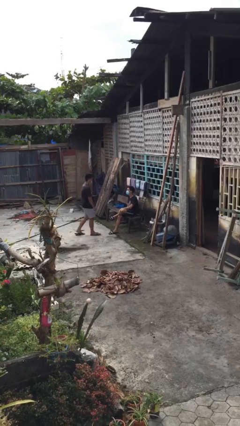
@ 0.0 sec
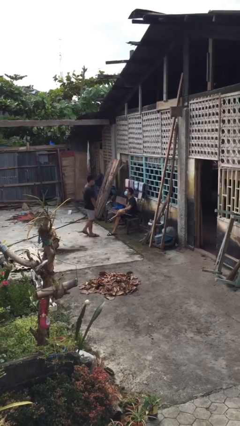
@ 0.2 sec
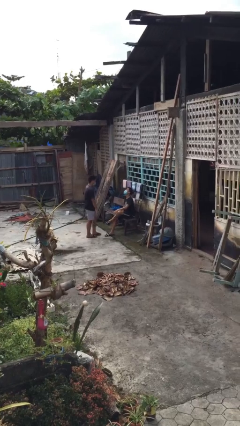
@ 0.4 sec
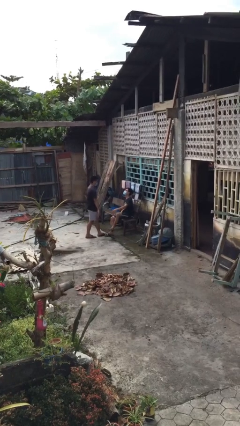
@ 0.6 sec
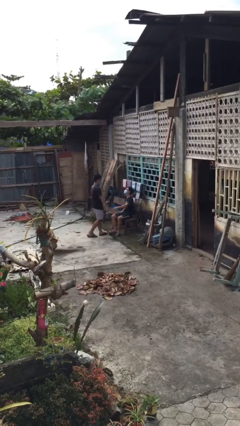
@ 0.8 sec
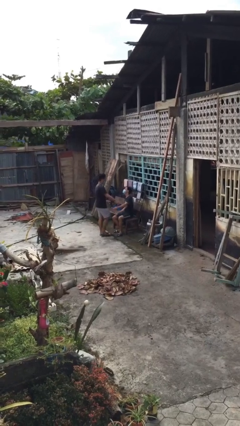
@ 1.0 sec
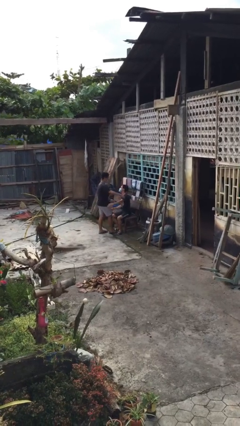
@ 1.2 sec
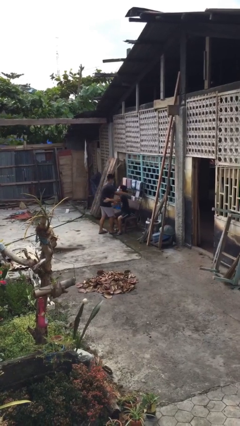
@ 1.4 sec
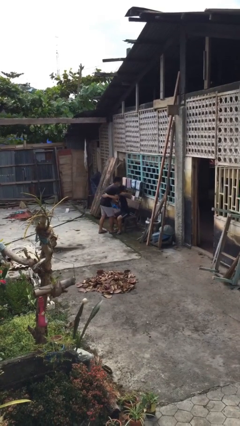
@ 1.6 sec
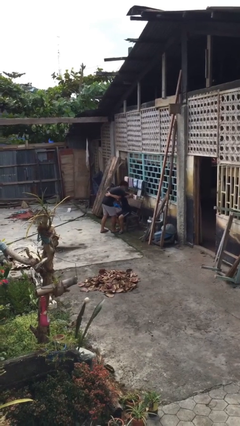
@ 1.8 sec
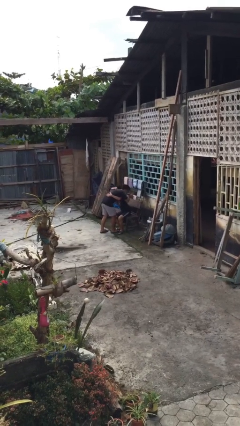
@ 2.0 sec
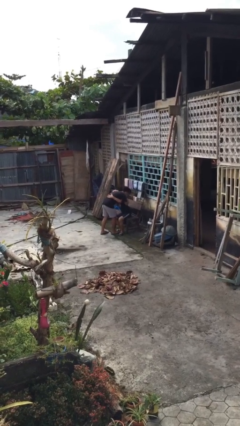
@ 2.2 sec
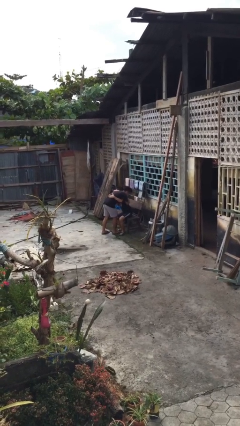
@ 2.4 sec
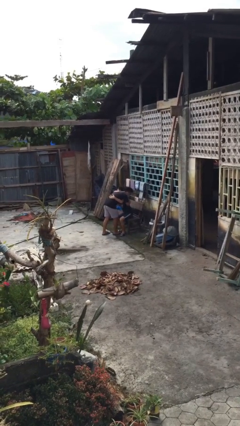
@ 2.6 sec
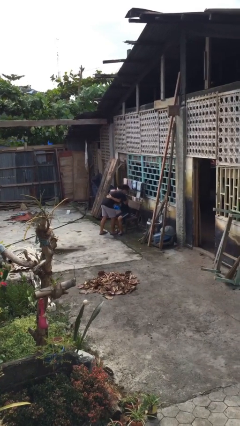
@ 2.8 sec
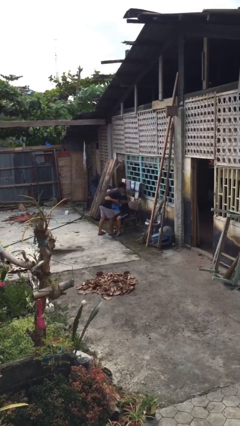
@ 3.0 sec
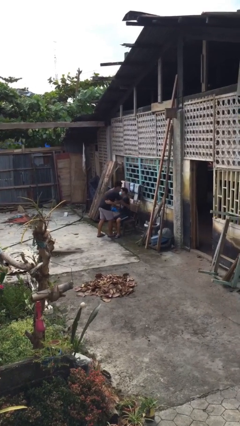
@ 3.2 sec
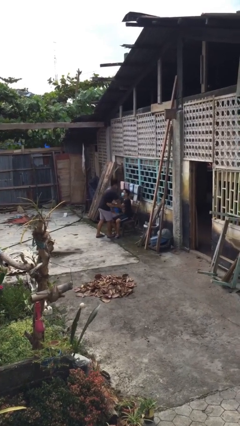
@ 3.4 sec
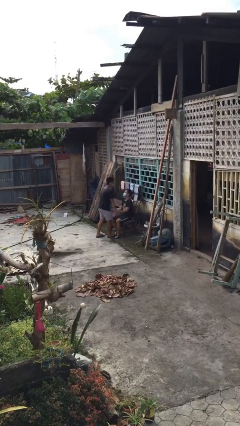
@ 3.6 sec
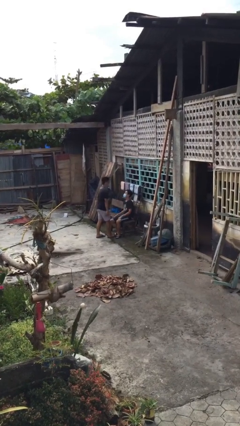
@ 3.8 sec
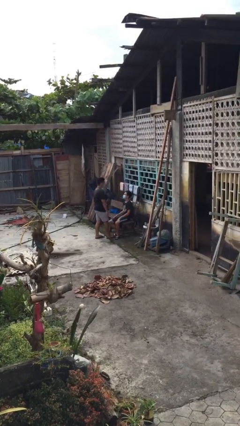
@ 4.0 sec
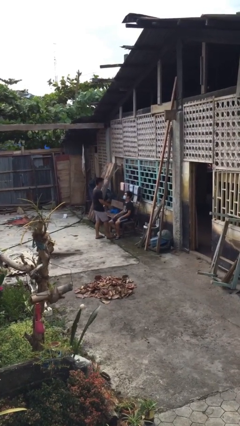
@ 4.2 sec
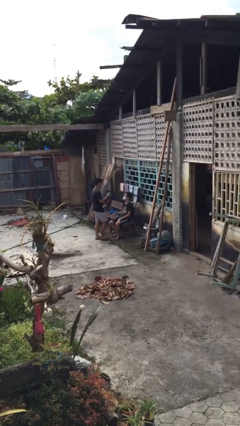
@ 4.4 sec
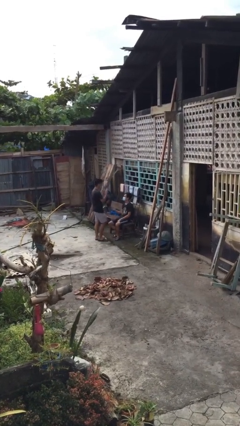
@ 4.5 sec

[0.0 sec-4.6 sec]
person embraces person

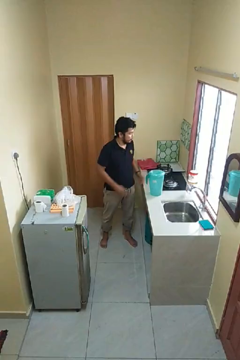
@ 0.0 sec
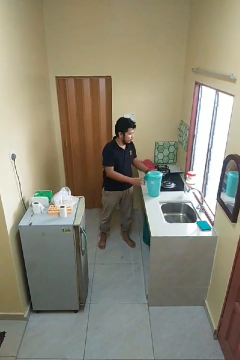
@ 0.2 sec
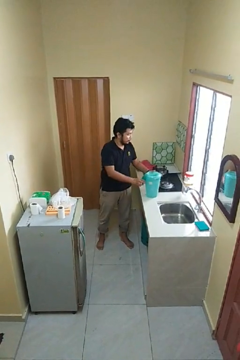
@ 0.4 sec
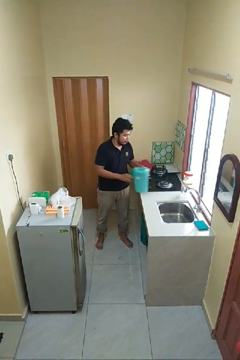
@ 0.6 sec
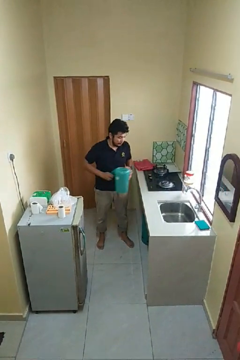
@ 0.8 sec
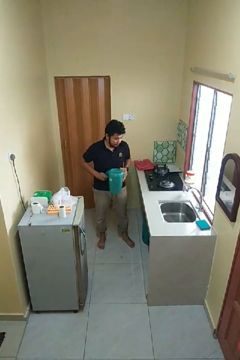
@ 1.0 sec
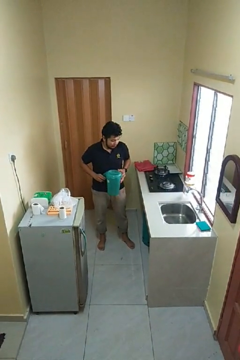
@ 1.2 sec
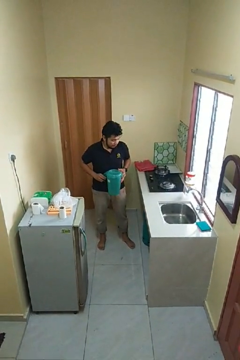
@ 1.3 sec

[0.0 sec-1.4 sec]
person picks up object from countertop

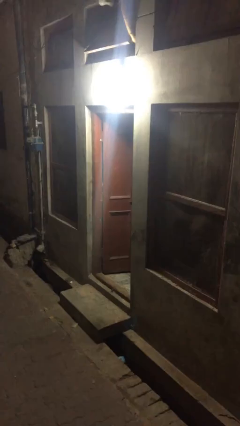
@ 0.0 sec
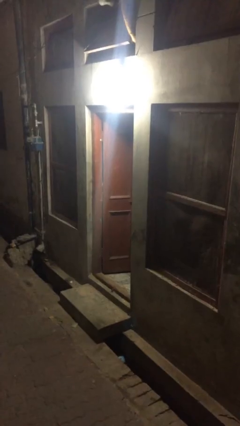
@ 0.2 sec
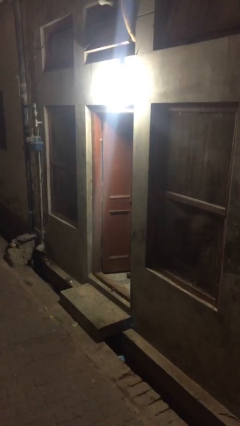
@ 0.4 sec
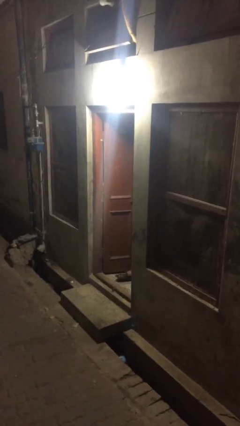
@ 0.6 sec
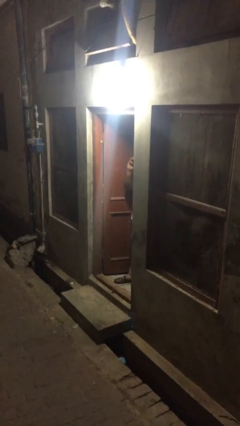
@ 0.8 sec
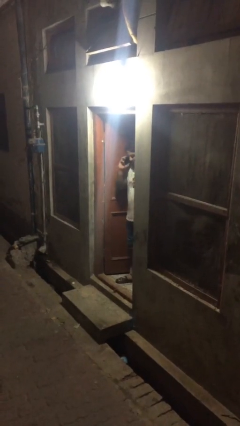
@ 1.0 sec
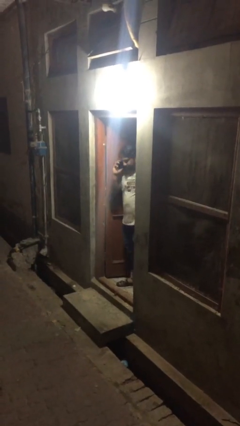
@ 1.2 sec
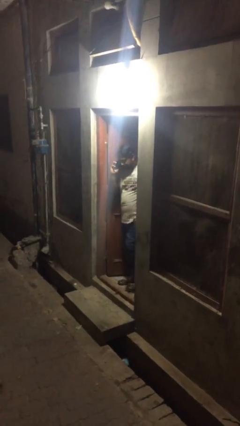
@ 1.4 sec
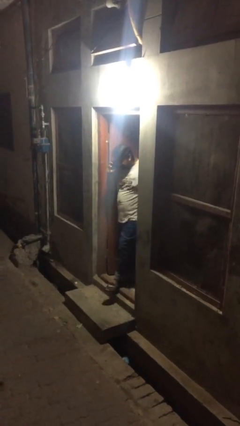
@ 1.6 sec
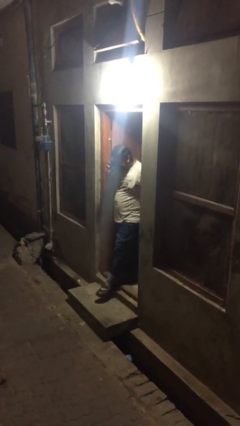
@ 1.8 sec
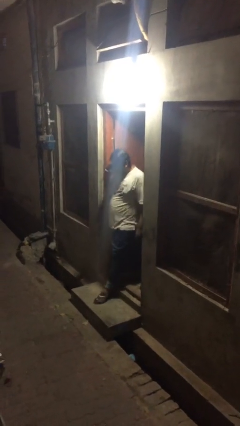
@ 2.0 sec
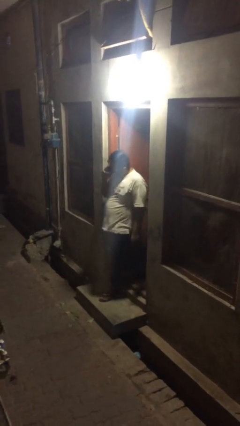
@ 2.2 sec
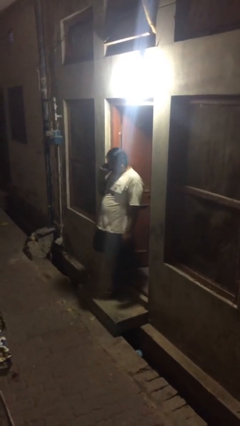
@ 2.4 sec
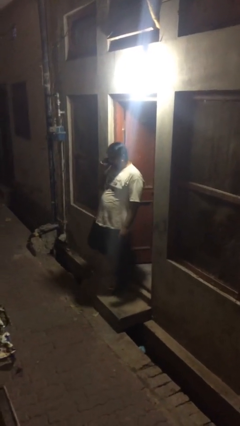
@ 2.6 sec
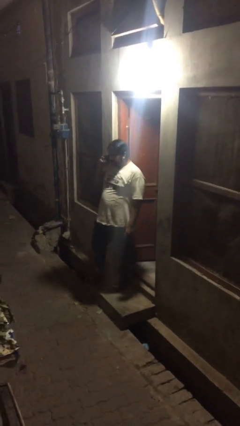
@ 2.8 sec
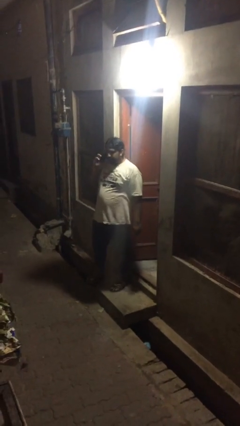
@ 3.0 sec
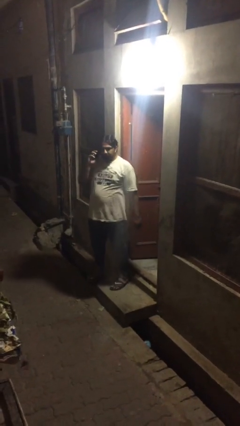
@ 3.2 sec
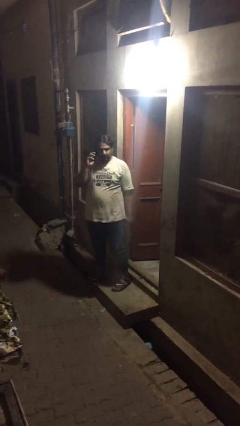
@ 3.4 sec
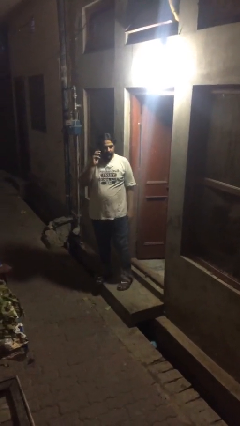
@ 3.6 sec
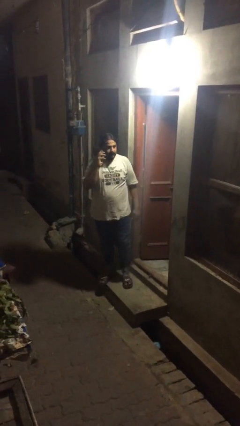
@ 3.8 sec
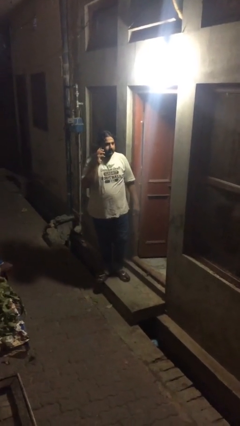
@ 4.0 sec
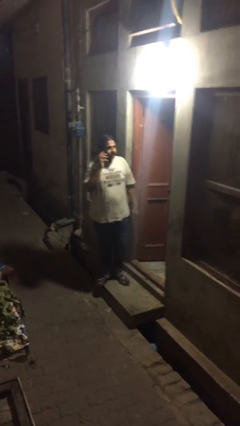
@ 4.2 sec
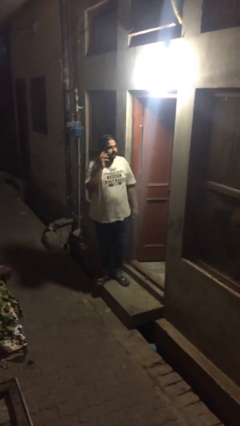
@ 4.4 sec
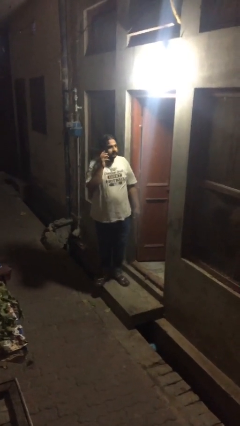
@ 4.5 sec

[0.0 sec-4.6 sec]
person enters scene through structure

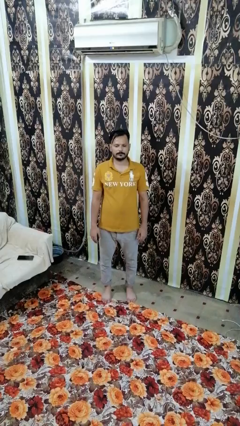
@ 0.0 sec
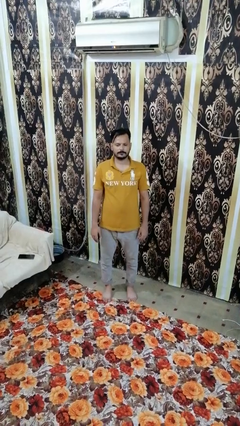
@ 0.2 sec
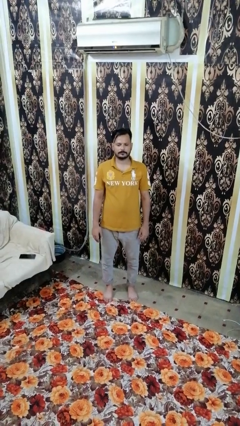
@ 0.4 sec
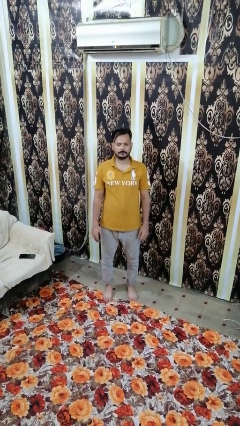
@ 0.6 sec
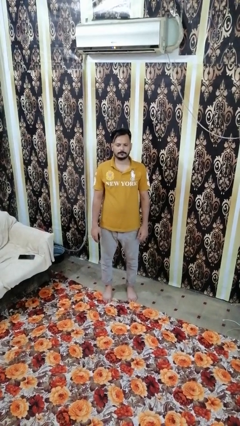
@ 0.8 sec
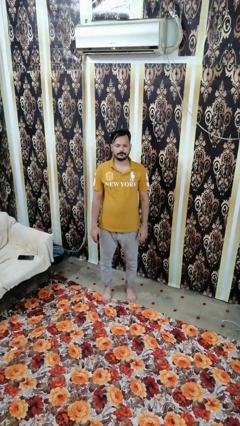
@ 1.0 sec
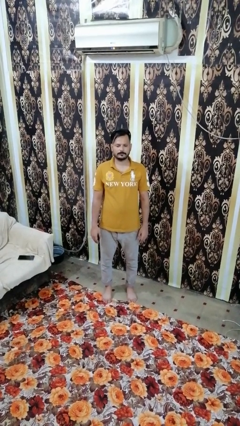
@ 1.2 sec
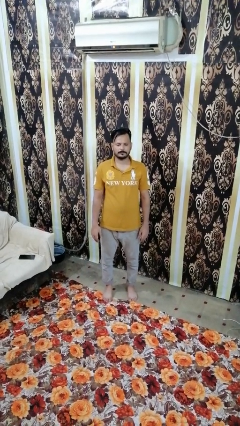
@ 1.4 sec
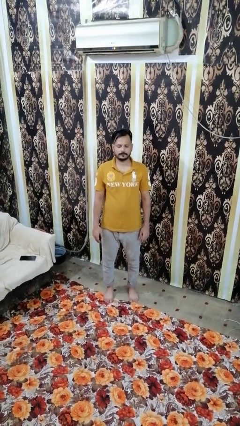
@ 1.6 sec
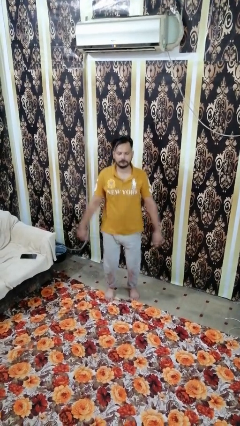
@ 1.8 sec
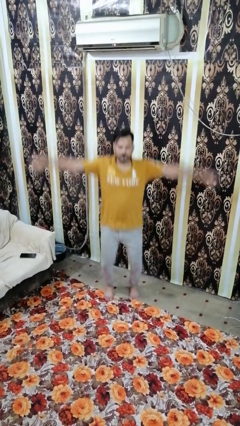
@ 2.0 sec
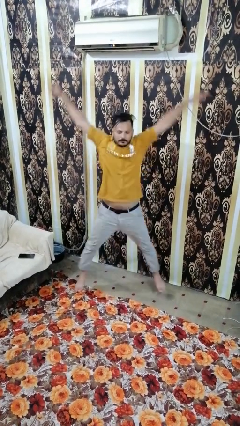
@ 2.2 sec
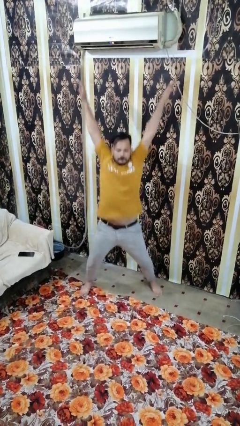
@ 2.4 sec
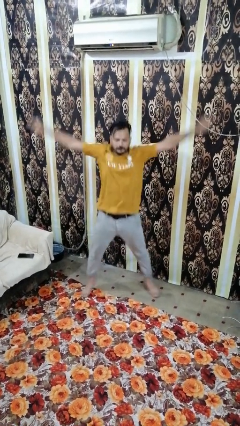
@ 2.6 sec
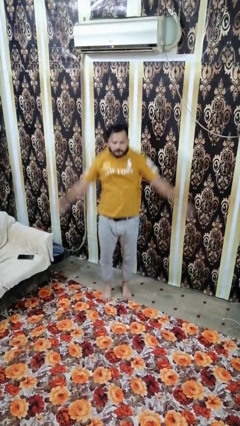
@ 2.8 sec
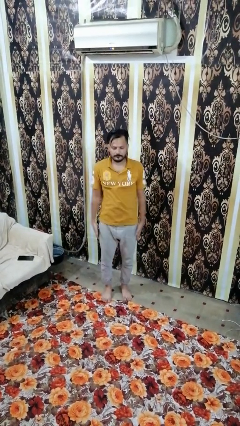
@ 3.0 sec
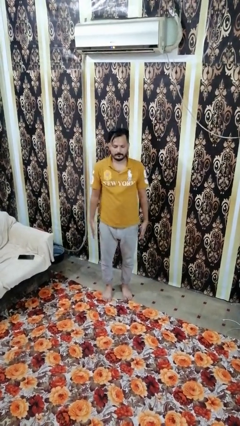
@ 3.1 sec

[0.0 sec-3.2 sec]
person exercises with jumping jacks

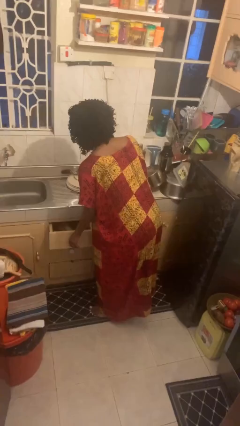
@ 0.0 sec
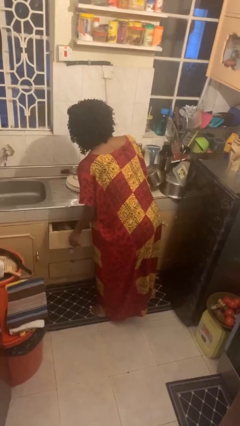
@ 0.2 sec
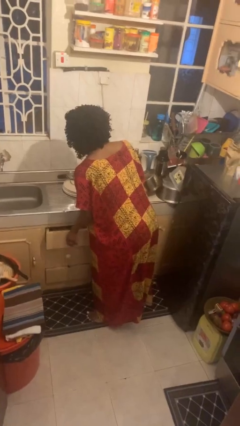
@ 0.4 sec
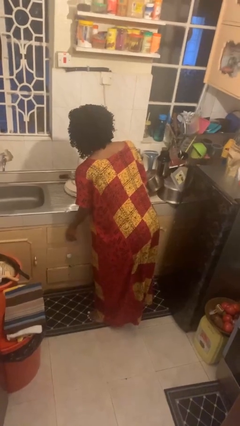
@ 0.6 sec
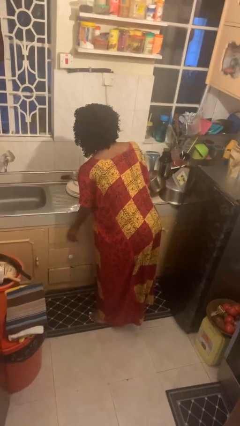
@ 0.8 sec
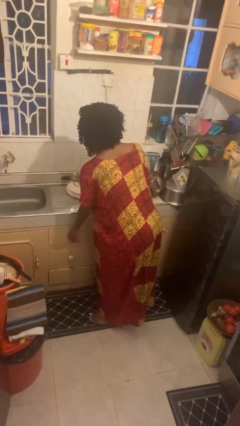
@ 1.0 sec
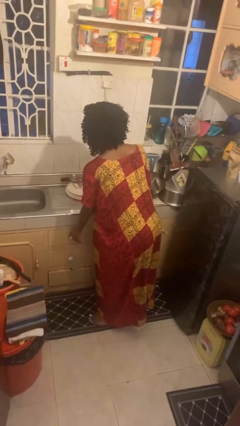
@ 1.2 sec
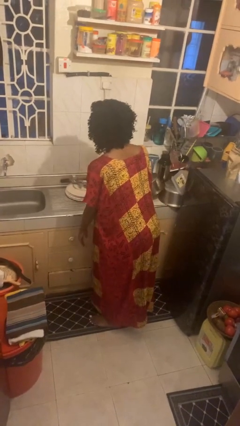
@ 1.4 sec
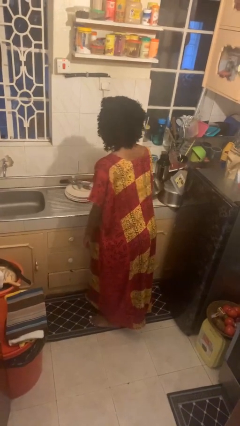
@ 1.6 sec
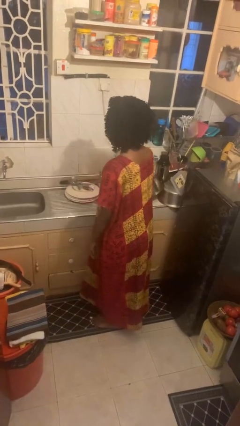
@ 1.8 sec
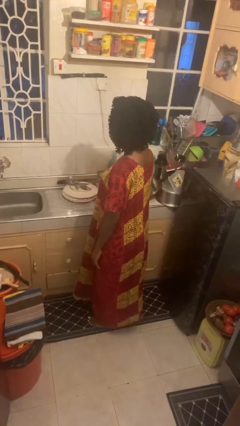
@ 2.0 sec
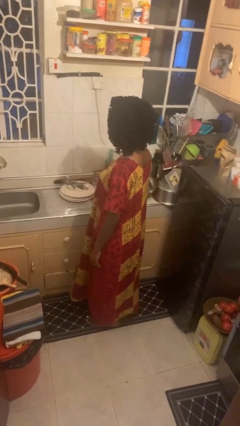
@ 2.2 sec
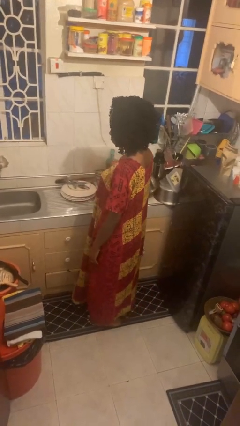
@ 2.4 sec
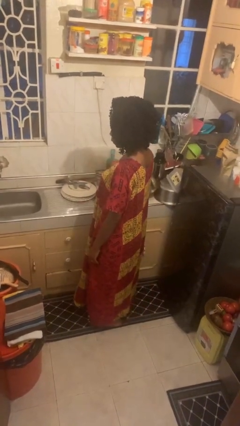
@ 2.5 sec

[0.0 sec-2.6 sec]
person closes kitchen drawer

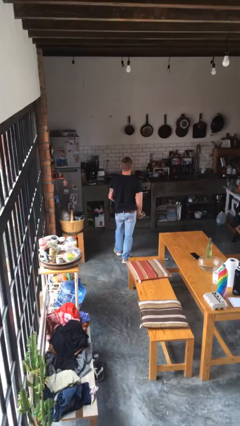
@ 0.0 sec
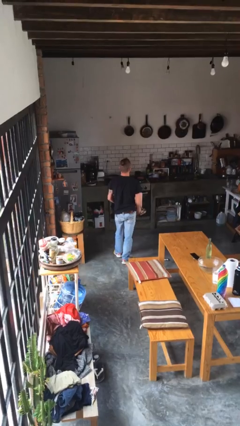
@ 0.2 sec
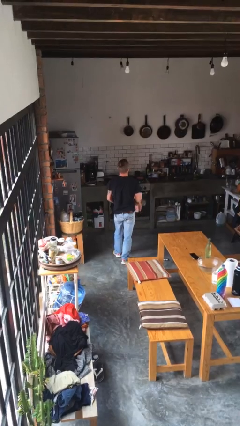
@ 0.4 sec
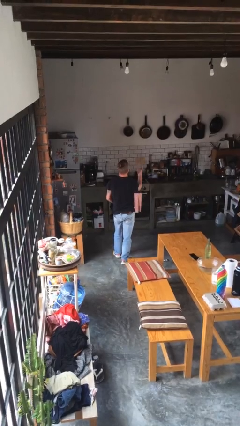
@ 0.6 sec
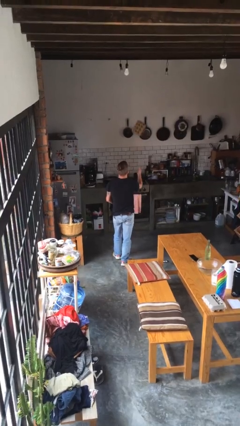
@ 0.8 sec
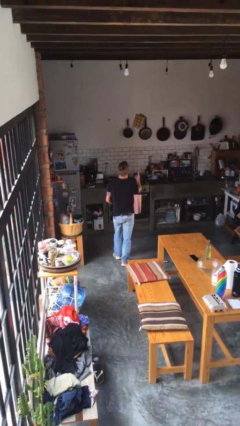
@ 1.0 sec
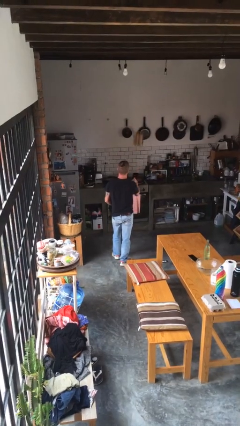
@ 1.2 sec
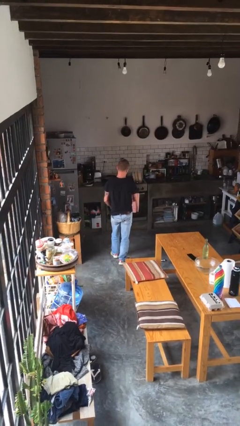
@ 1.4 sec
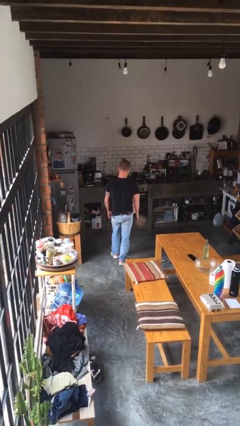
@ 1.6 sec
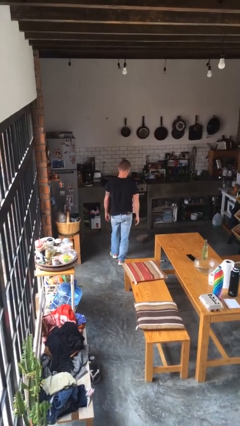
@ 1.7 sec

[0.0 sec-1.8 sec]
person throws object into air
